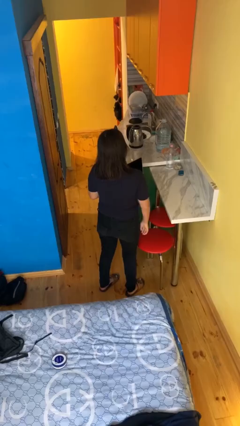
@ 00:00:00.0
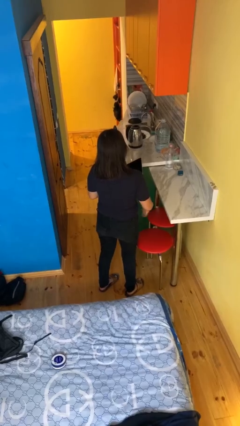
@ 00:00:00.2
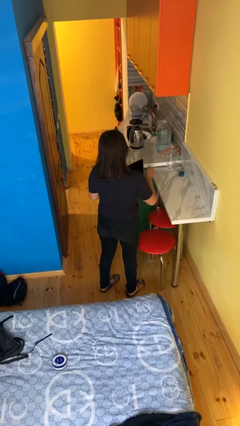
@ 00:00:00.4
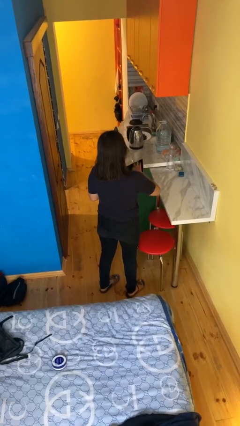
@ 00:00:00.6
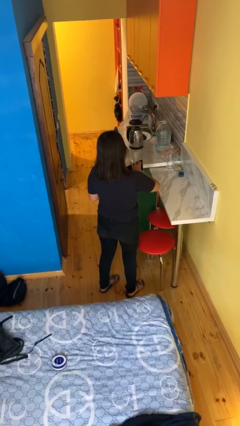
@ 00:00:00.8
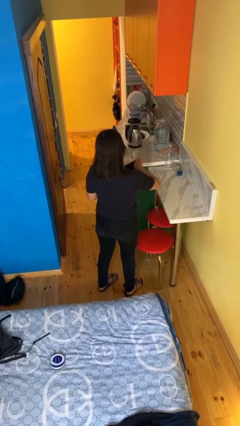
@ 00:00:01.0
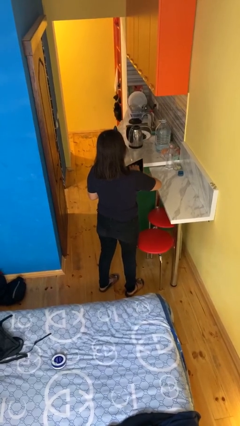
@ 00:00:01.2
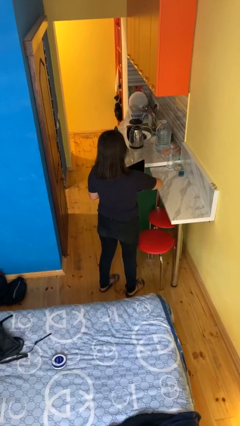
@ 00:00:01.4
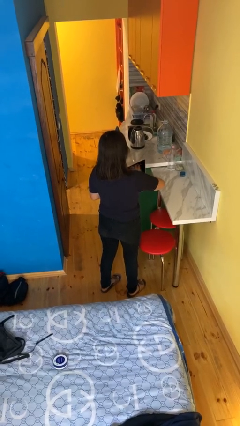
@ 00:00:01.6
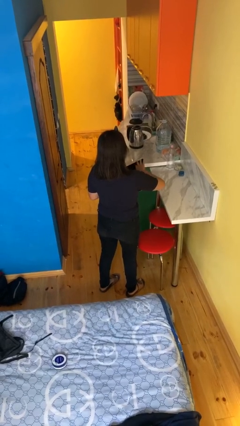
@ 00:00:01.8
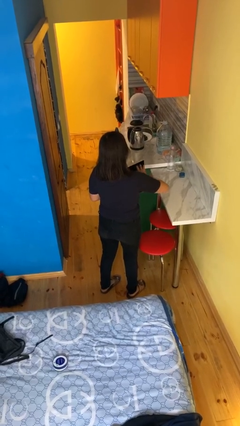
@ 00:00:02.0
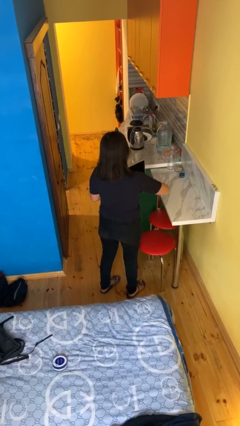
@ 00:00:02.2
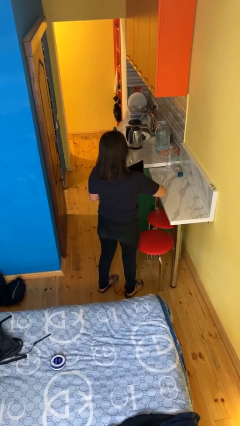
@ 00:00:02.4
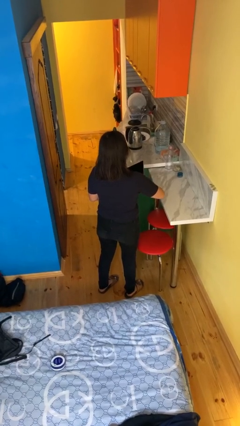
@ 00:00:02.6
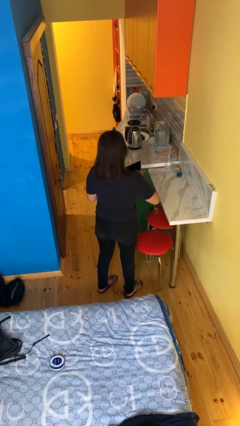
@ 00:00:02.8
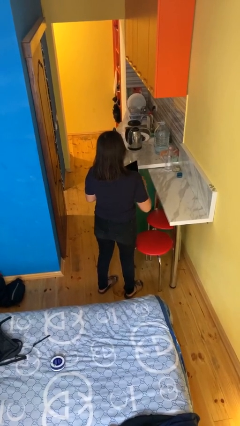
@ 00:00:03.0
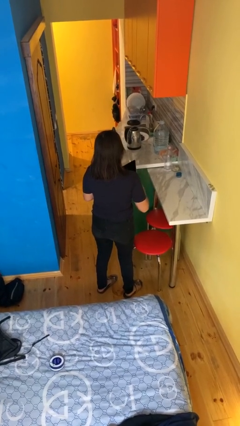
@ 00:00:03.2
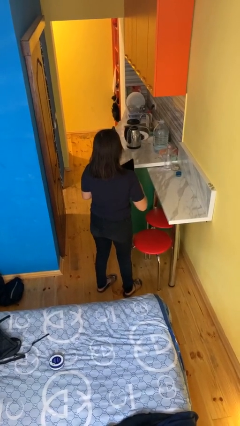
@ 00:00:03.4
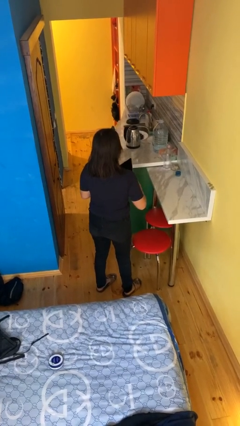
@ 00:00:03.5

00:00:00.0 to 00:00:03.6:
person interacts with tablet

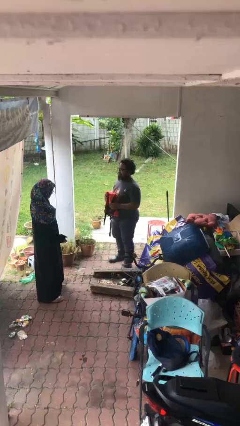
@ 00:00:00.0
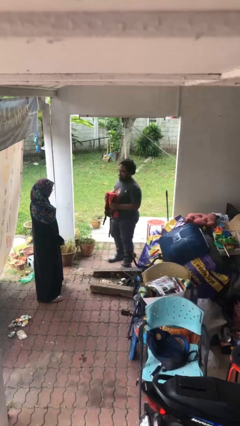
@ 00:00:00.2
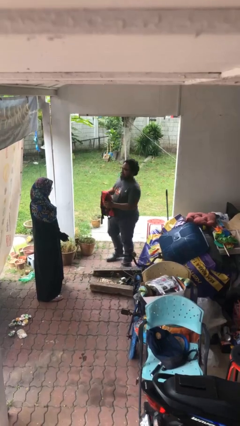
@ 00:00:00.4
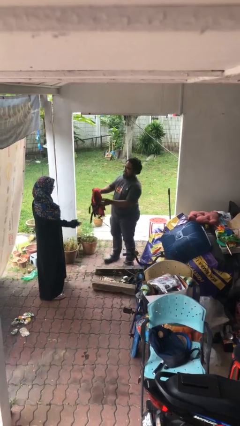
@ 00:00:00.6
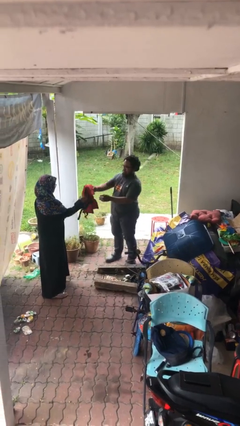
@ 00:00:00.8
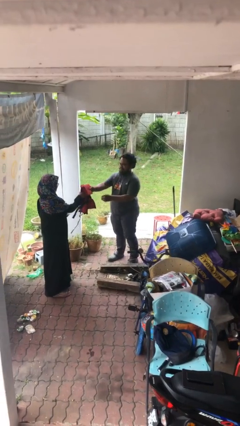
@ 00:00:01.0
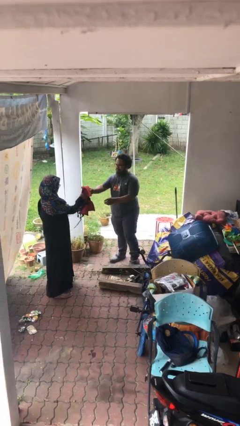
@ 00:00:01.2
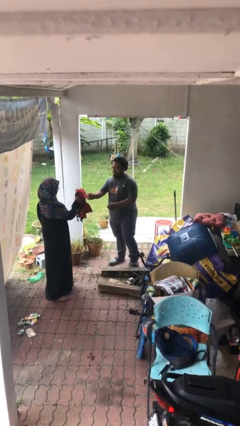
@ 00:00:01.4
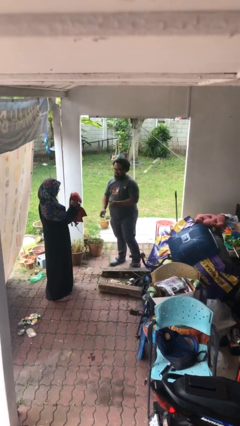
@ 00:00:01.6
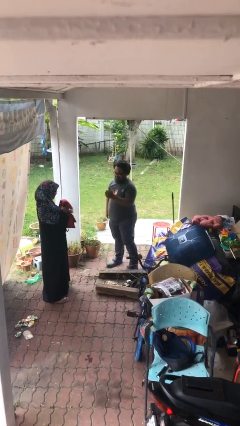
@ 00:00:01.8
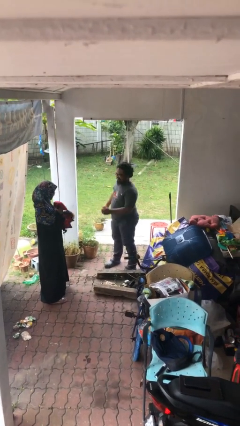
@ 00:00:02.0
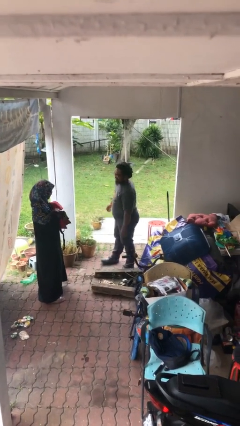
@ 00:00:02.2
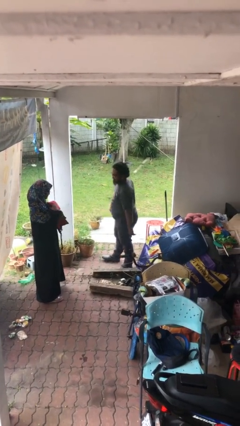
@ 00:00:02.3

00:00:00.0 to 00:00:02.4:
person transfers object to person

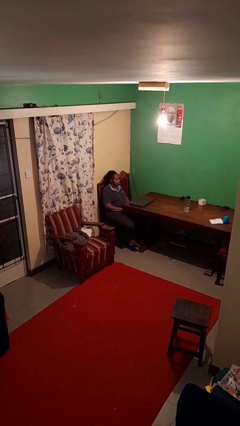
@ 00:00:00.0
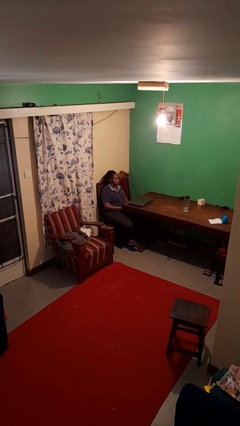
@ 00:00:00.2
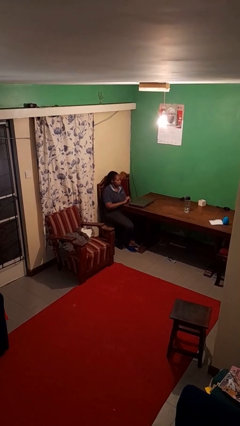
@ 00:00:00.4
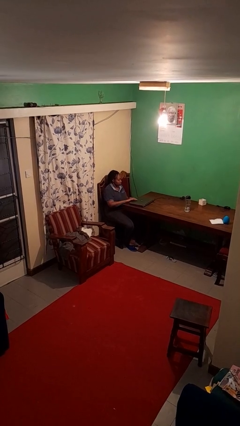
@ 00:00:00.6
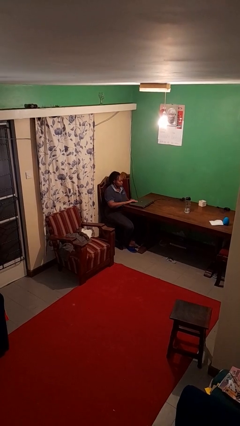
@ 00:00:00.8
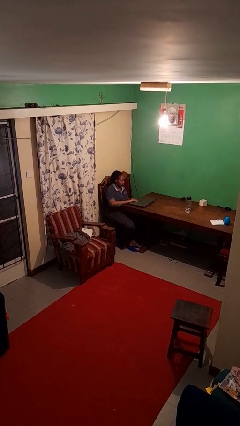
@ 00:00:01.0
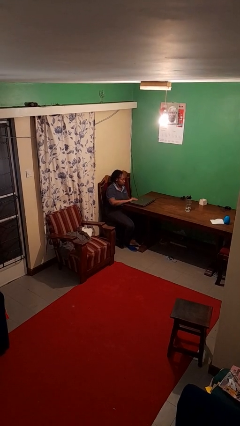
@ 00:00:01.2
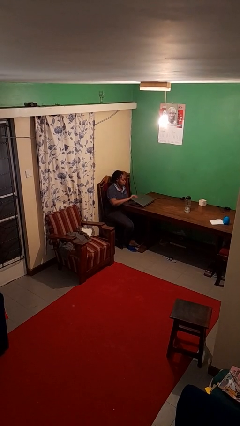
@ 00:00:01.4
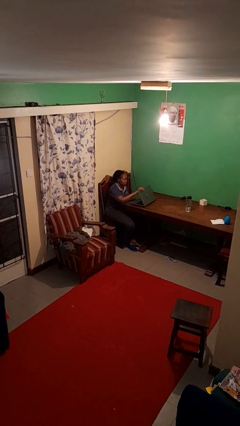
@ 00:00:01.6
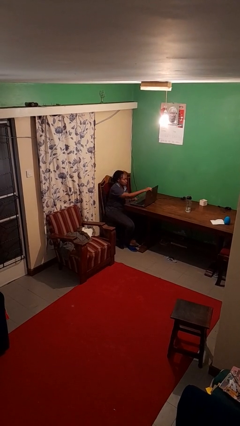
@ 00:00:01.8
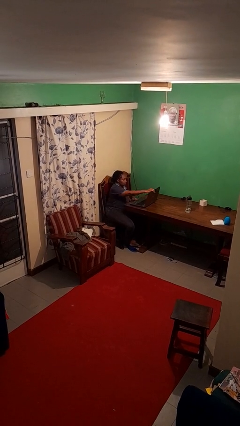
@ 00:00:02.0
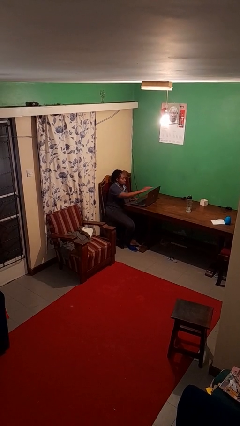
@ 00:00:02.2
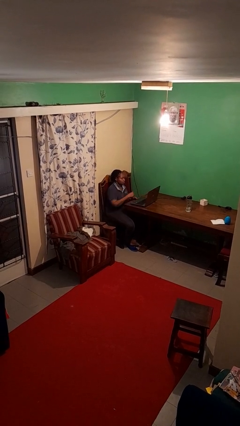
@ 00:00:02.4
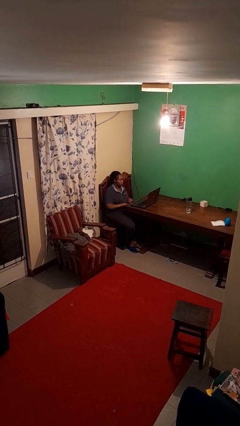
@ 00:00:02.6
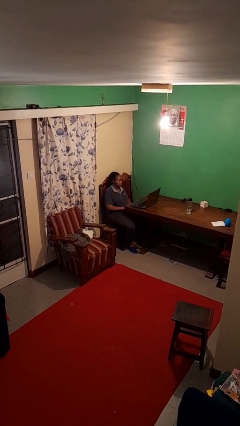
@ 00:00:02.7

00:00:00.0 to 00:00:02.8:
person opens laptop

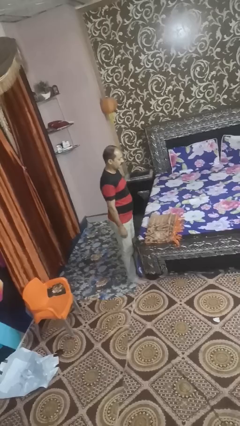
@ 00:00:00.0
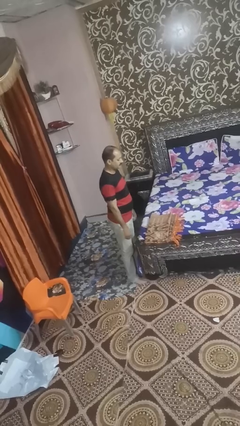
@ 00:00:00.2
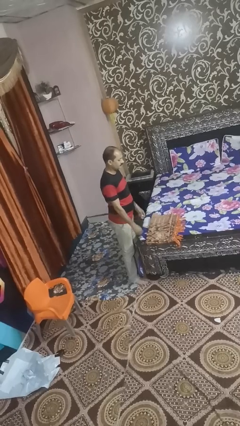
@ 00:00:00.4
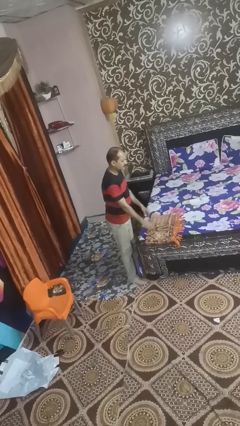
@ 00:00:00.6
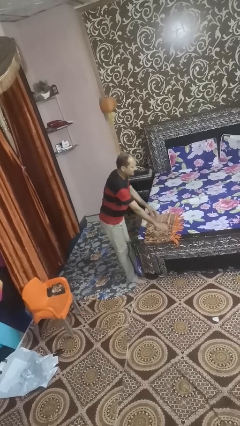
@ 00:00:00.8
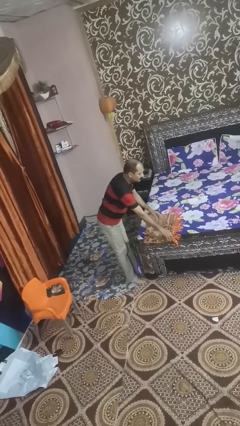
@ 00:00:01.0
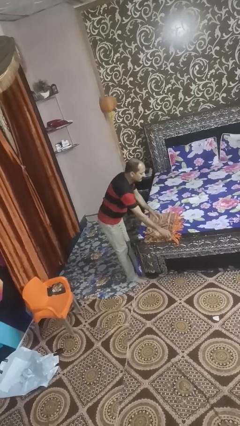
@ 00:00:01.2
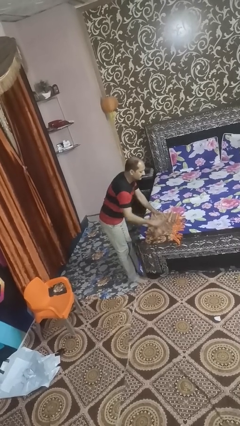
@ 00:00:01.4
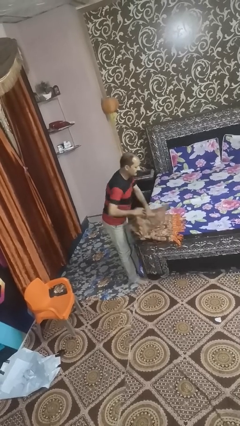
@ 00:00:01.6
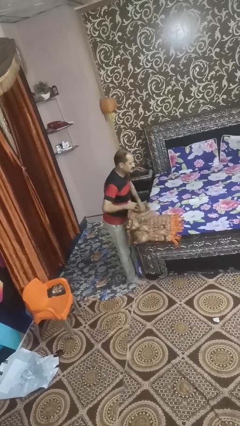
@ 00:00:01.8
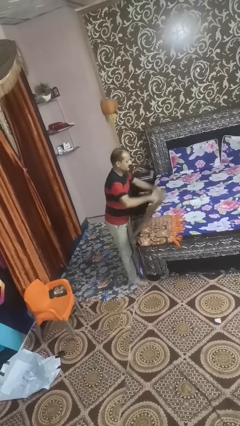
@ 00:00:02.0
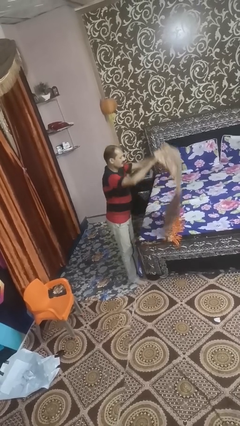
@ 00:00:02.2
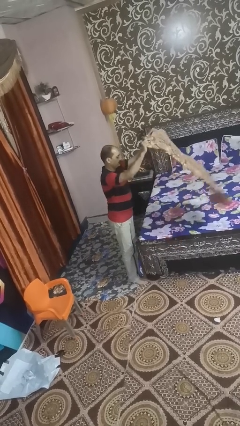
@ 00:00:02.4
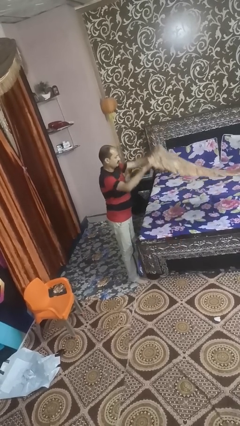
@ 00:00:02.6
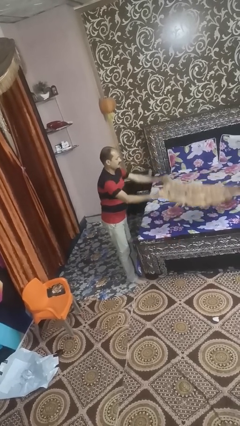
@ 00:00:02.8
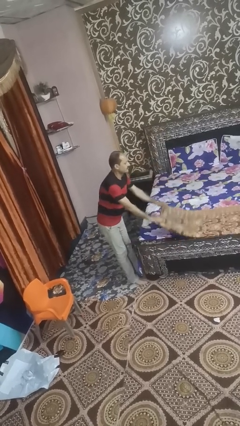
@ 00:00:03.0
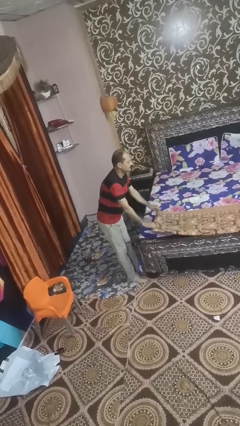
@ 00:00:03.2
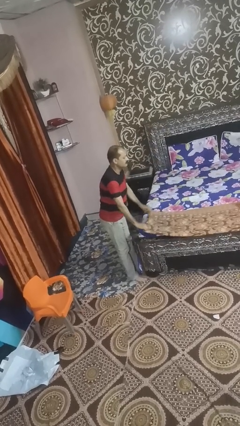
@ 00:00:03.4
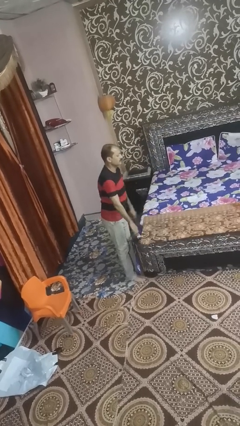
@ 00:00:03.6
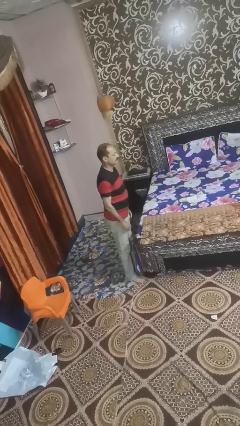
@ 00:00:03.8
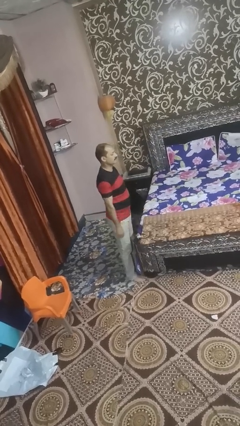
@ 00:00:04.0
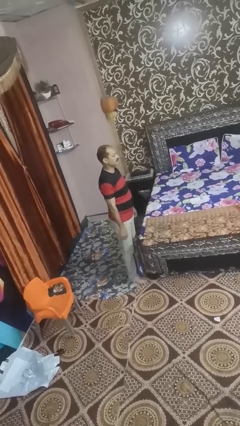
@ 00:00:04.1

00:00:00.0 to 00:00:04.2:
person unfolds blanket

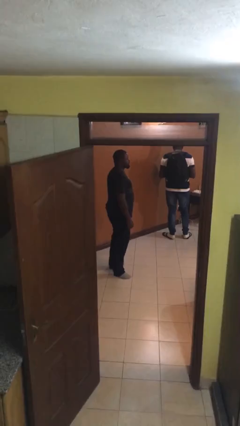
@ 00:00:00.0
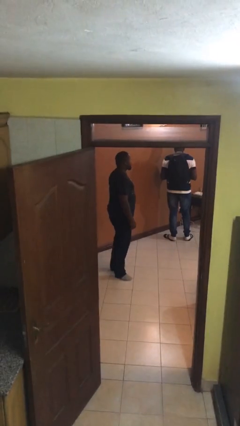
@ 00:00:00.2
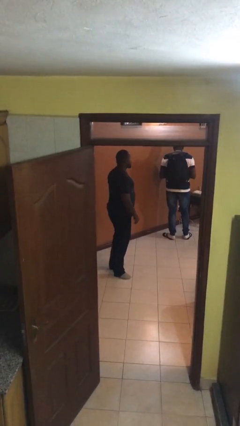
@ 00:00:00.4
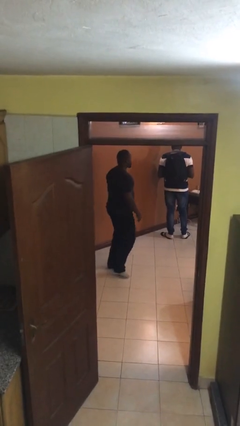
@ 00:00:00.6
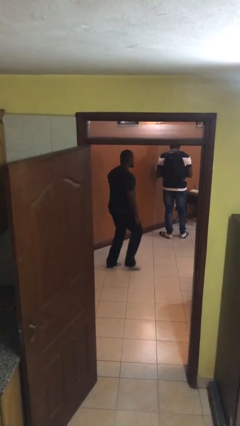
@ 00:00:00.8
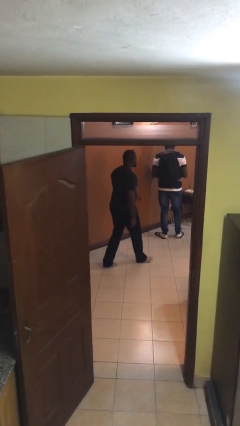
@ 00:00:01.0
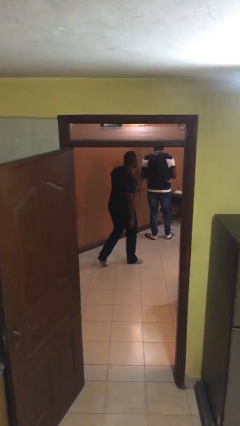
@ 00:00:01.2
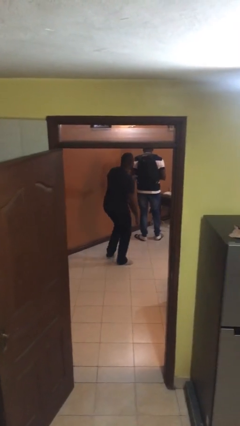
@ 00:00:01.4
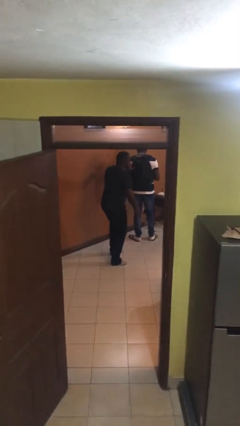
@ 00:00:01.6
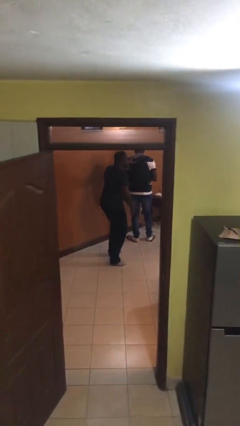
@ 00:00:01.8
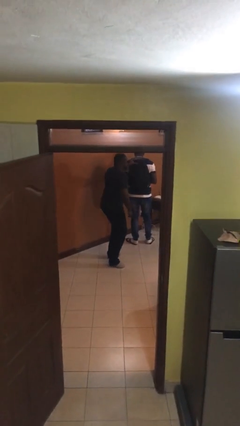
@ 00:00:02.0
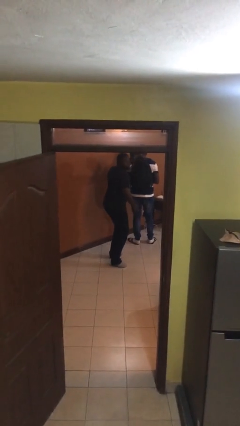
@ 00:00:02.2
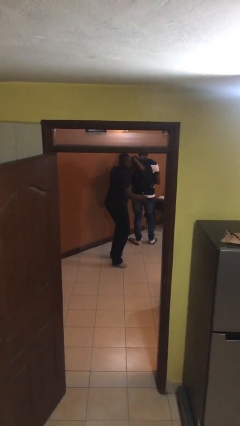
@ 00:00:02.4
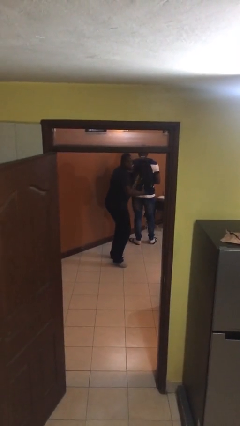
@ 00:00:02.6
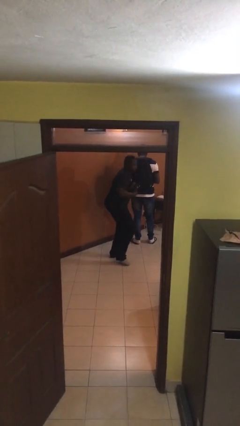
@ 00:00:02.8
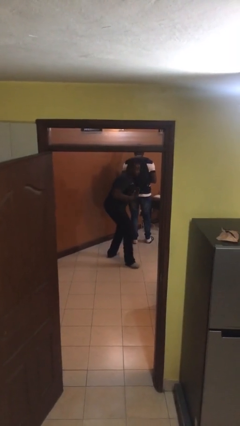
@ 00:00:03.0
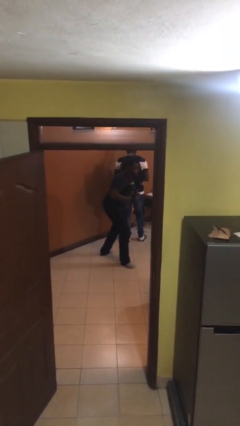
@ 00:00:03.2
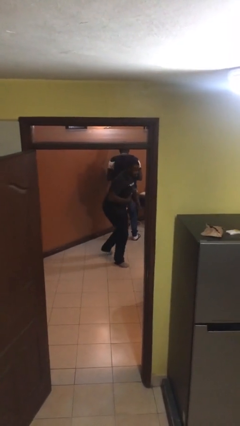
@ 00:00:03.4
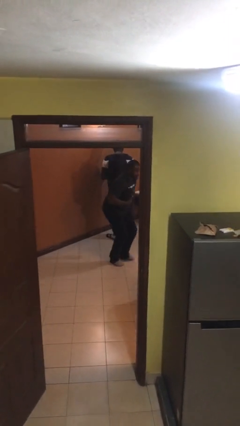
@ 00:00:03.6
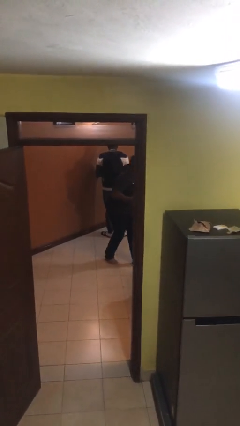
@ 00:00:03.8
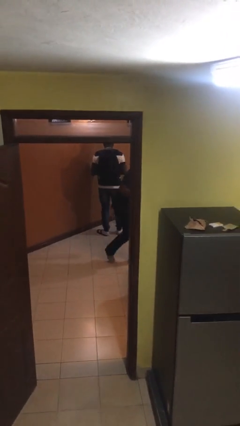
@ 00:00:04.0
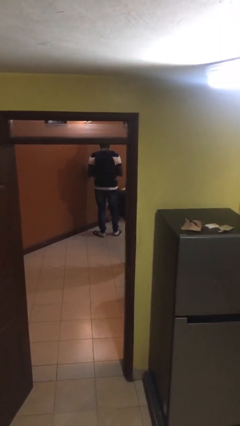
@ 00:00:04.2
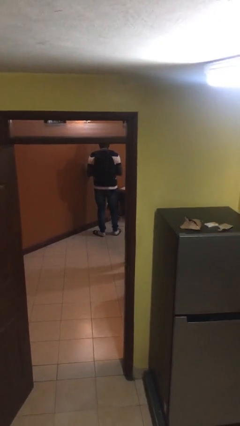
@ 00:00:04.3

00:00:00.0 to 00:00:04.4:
person steals object from person

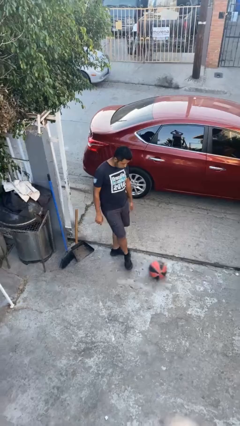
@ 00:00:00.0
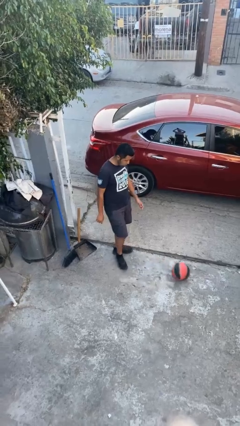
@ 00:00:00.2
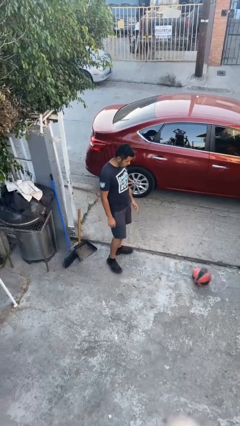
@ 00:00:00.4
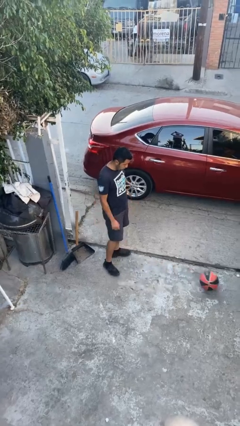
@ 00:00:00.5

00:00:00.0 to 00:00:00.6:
person kicks object to person
